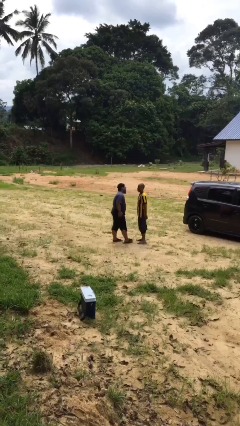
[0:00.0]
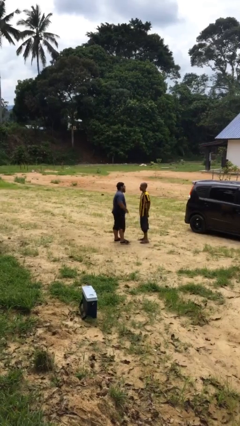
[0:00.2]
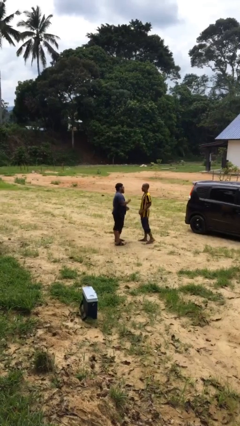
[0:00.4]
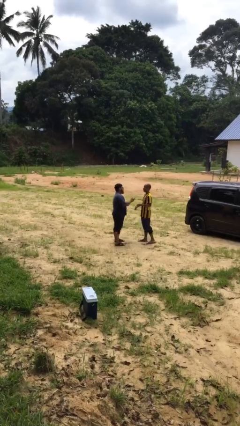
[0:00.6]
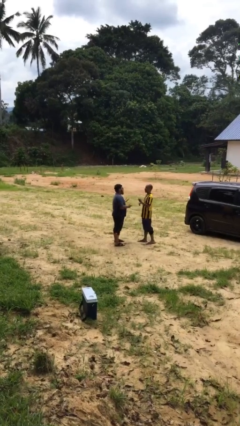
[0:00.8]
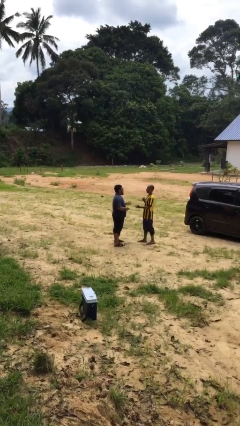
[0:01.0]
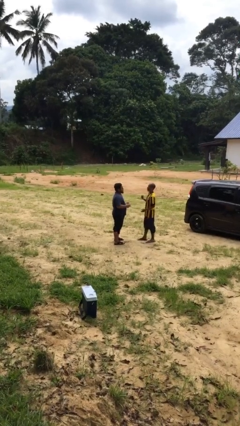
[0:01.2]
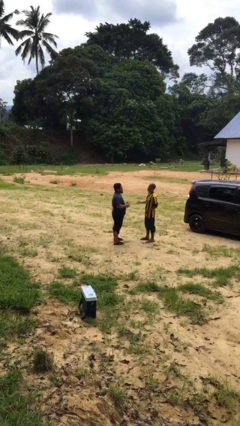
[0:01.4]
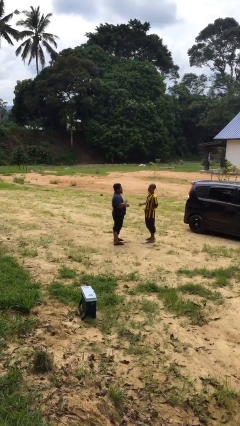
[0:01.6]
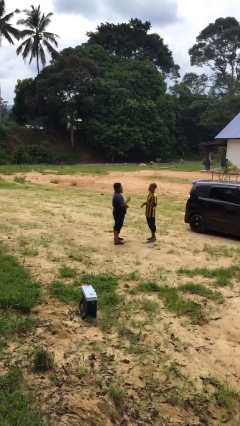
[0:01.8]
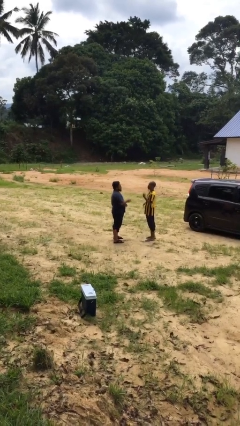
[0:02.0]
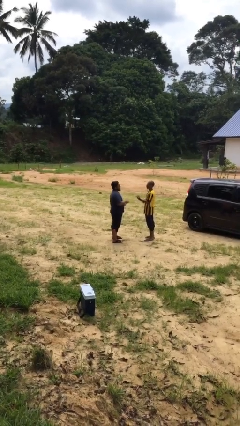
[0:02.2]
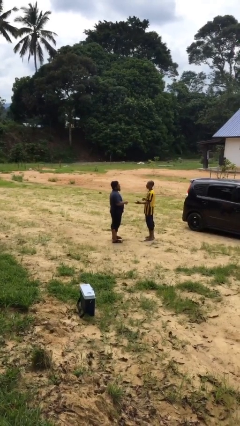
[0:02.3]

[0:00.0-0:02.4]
person talks to person

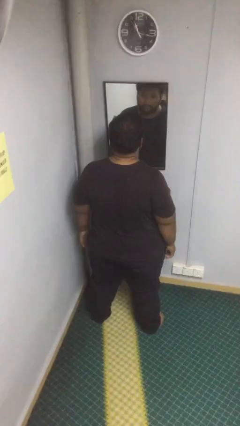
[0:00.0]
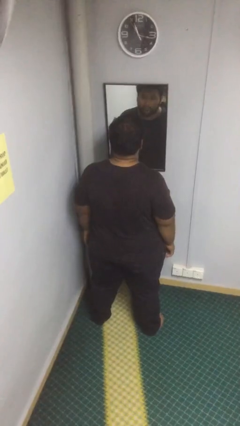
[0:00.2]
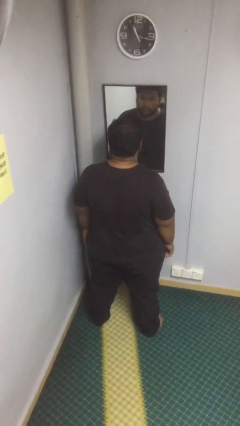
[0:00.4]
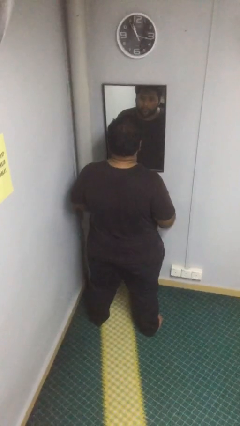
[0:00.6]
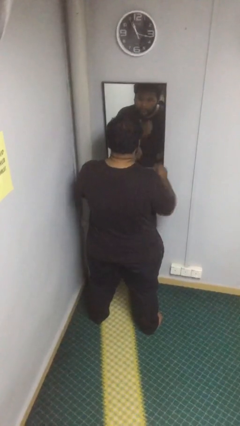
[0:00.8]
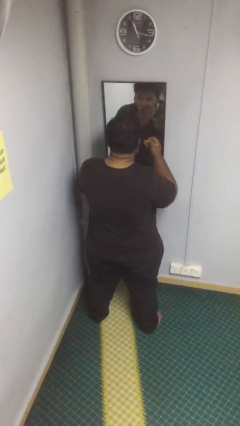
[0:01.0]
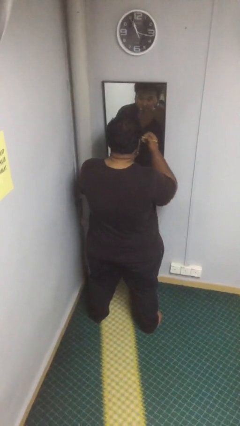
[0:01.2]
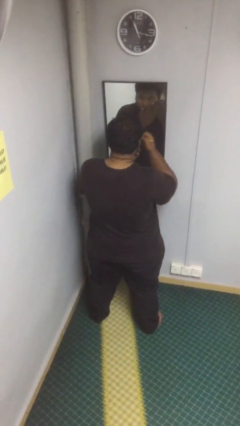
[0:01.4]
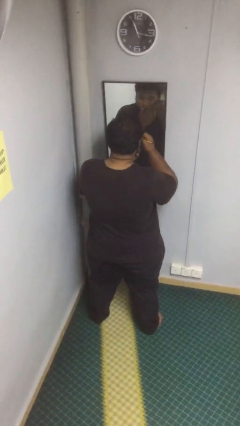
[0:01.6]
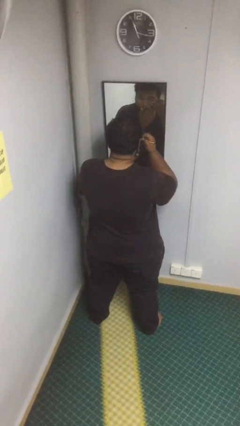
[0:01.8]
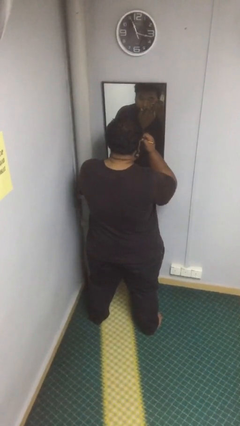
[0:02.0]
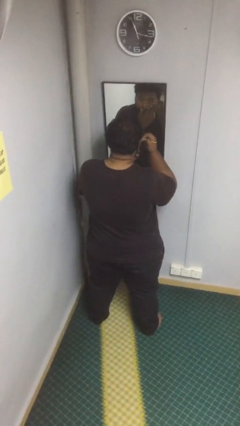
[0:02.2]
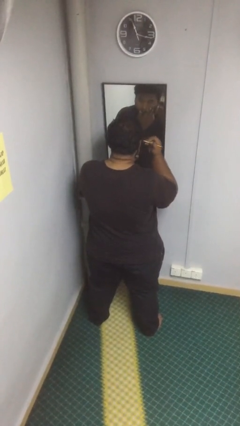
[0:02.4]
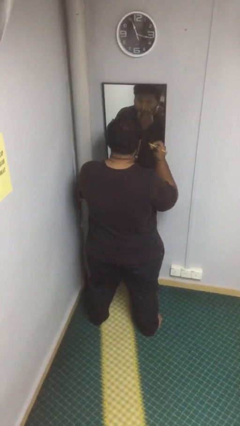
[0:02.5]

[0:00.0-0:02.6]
person applies eye makeup

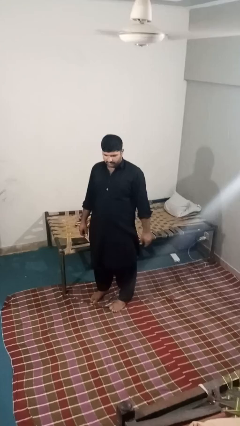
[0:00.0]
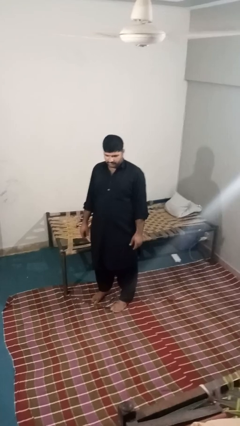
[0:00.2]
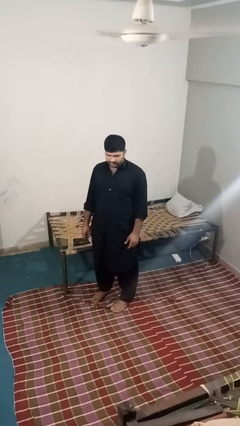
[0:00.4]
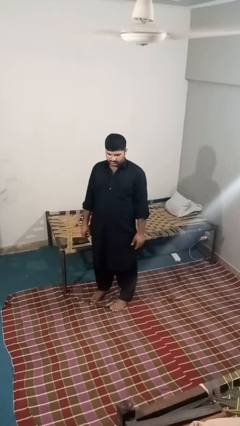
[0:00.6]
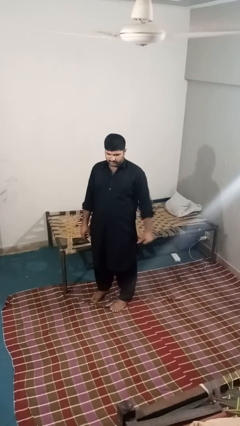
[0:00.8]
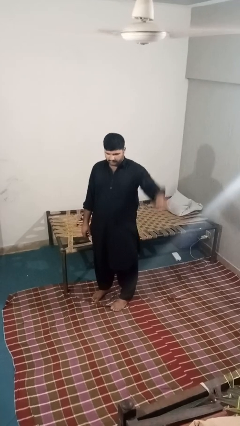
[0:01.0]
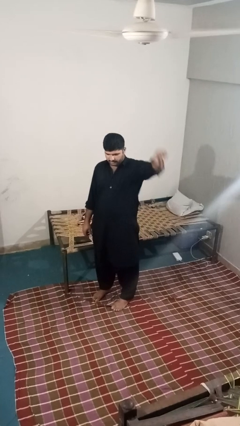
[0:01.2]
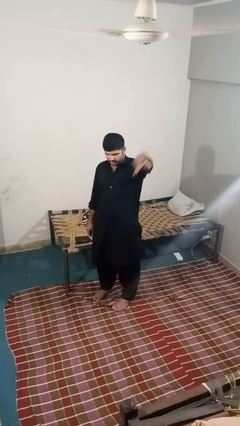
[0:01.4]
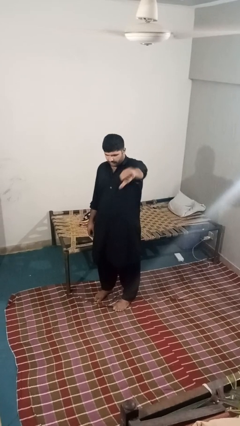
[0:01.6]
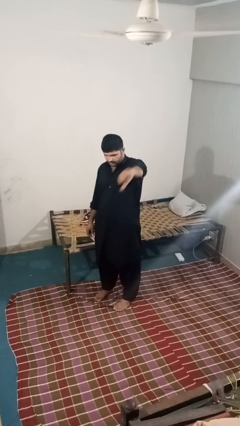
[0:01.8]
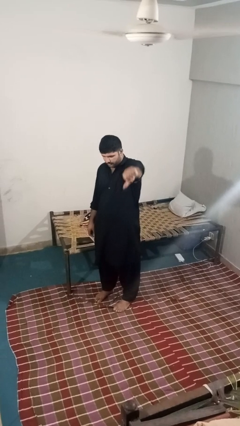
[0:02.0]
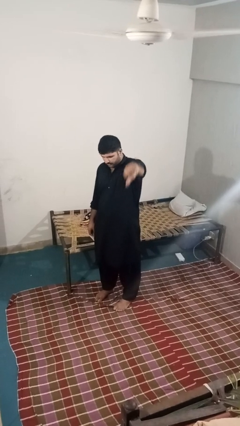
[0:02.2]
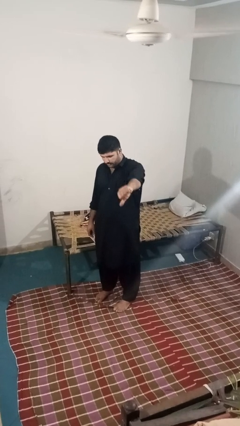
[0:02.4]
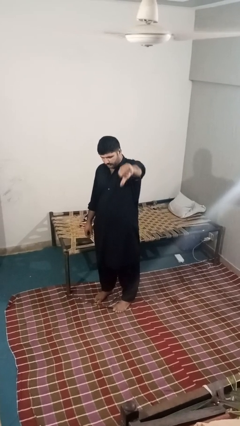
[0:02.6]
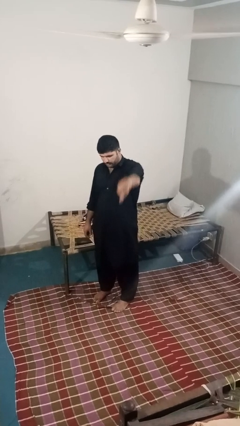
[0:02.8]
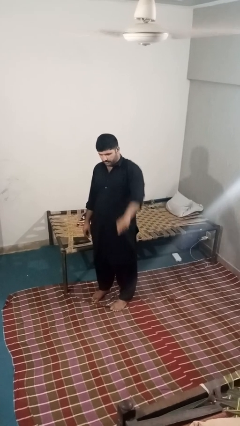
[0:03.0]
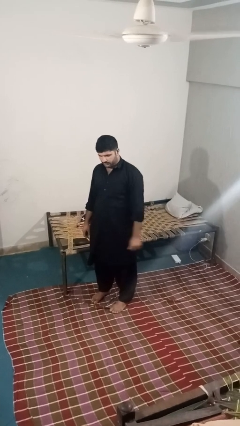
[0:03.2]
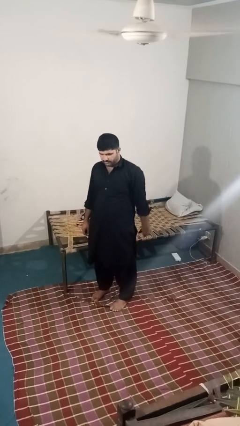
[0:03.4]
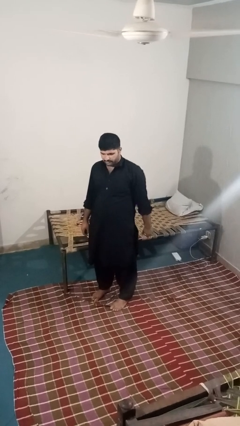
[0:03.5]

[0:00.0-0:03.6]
person gestures thumbs down

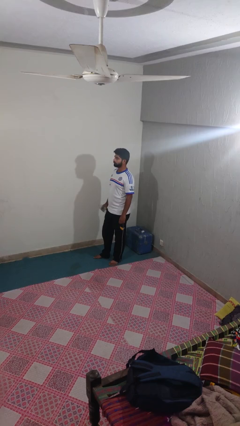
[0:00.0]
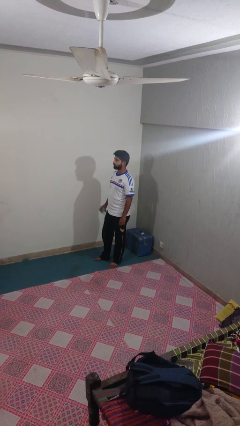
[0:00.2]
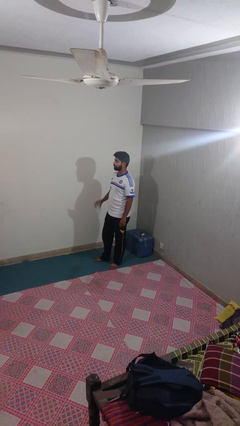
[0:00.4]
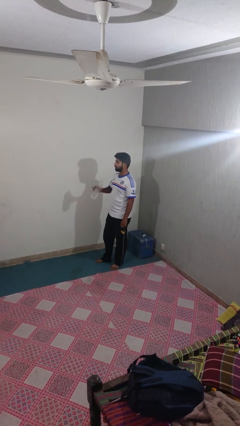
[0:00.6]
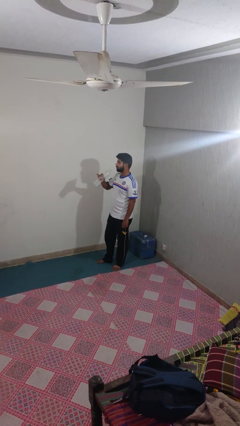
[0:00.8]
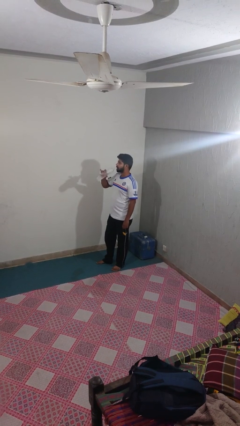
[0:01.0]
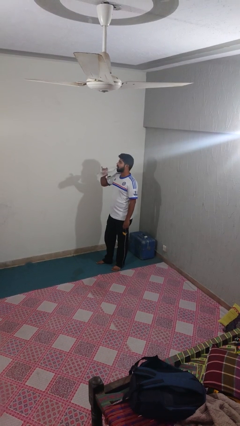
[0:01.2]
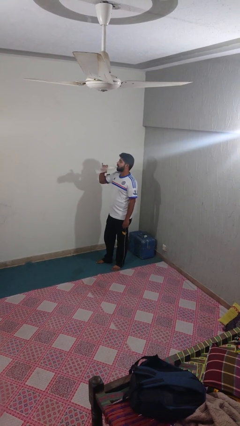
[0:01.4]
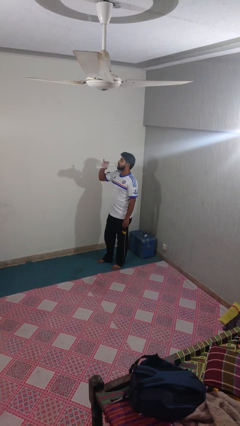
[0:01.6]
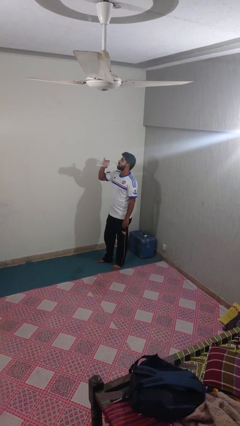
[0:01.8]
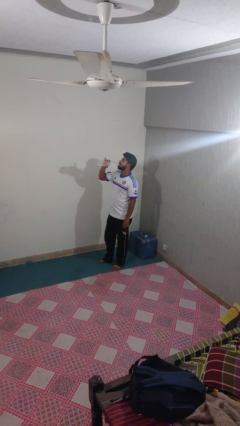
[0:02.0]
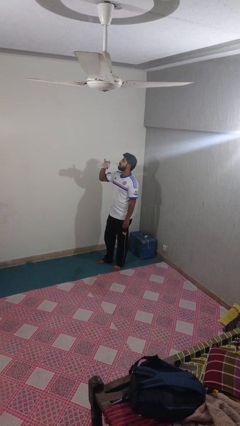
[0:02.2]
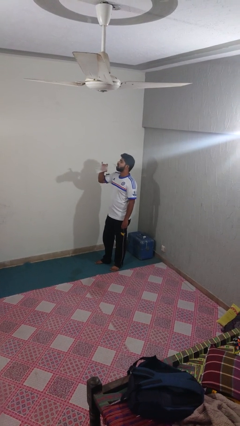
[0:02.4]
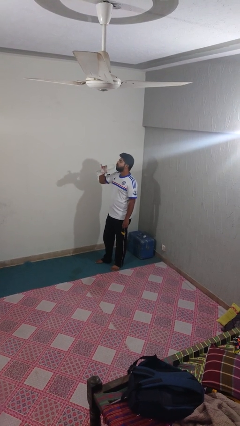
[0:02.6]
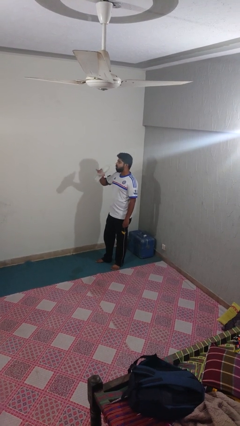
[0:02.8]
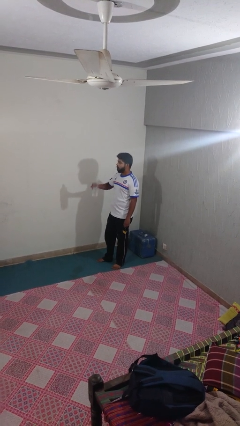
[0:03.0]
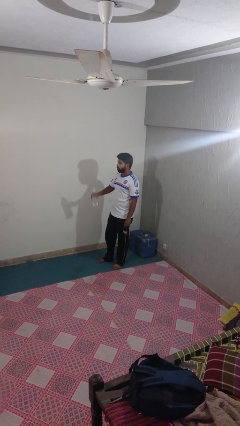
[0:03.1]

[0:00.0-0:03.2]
person drinks from bottle

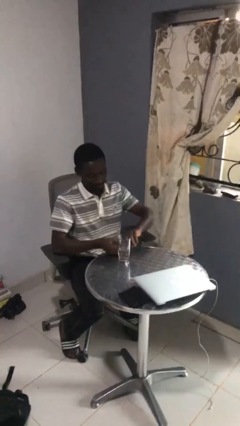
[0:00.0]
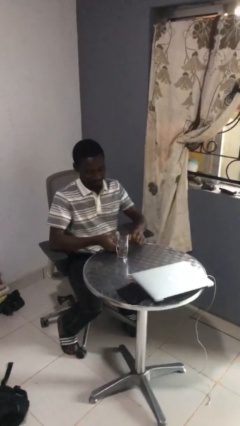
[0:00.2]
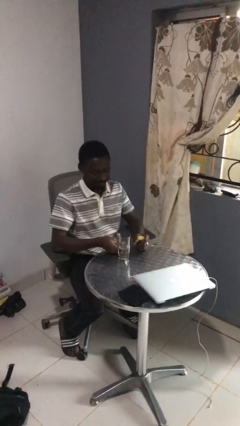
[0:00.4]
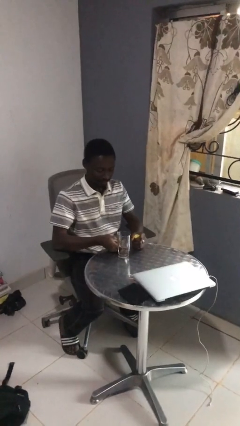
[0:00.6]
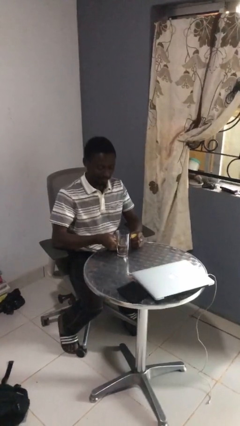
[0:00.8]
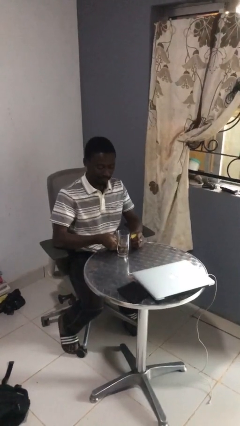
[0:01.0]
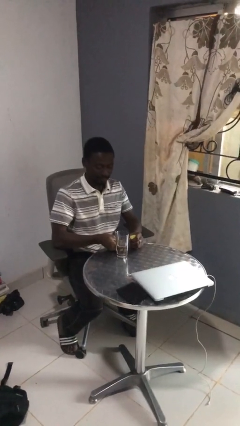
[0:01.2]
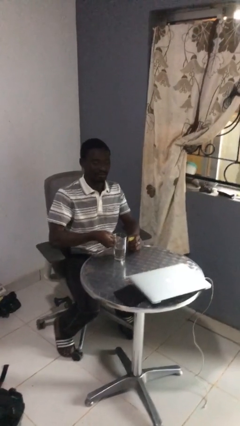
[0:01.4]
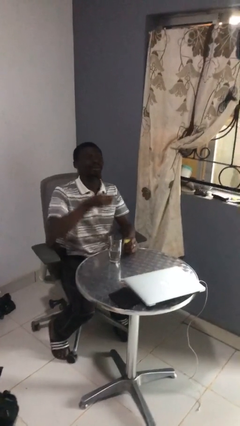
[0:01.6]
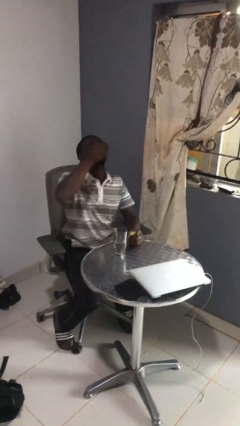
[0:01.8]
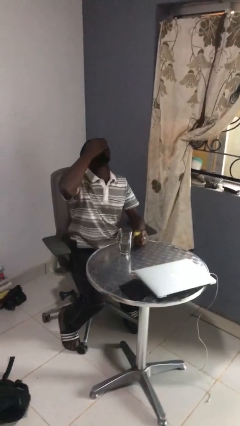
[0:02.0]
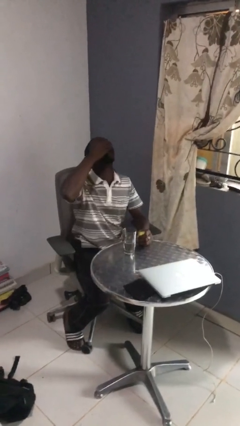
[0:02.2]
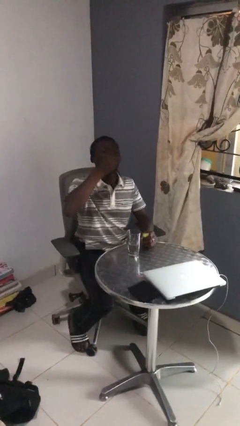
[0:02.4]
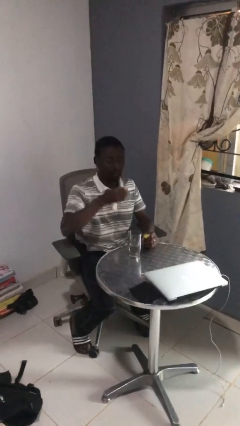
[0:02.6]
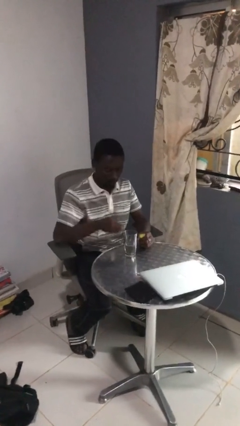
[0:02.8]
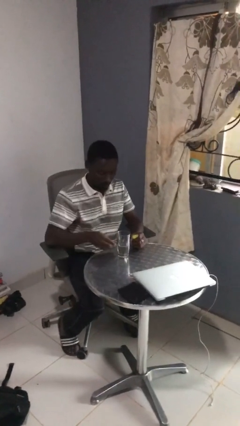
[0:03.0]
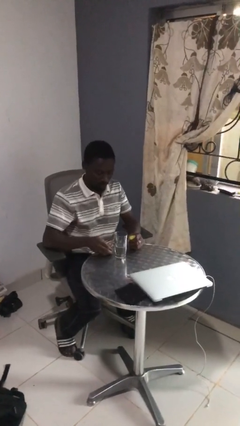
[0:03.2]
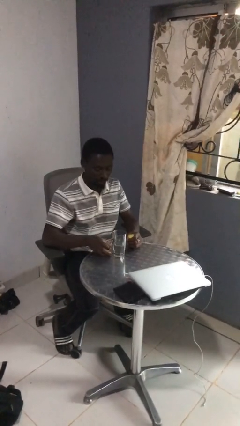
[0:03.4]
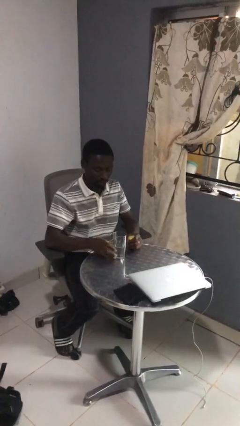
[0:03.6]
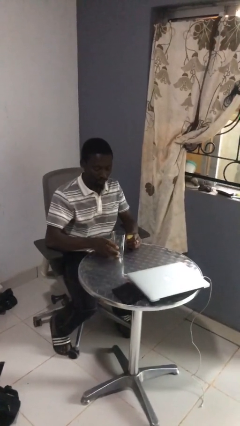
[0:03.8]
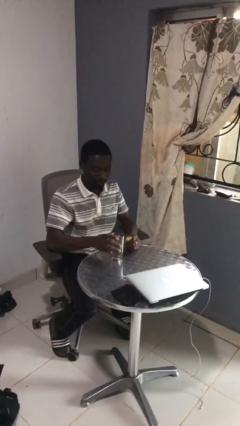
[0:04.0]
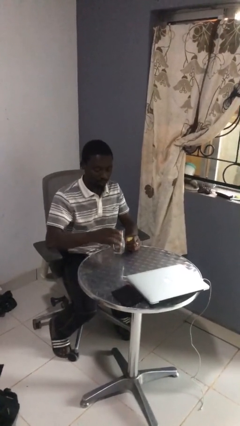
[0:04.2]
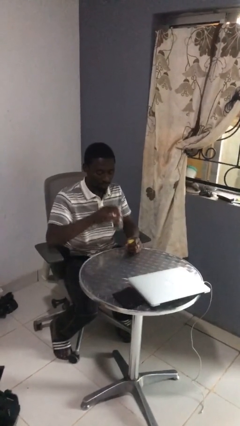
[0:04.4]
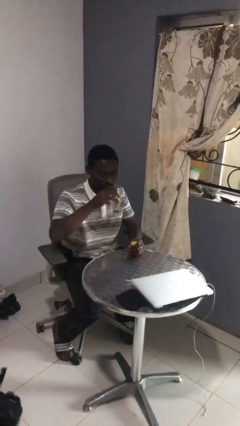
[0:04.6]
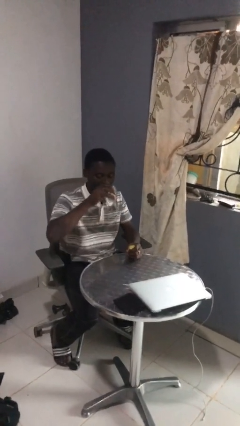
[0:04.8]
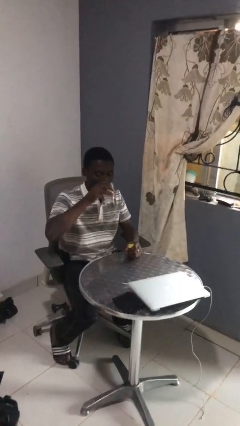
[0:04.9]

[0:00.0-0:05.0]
person takes medicine pills

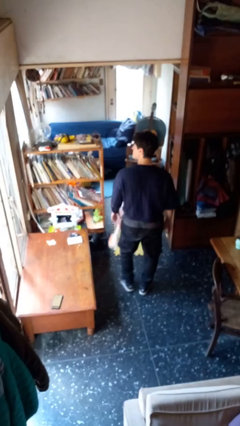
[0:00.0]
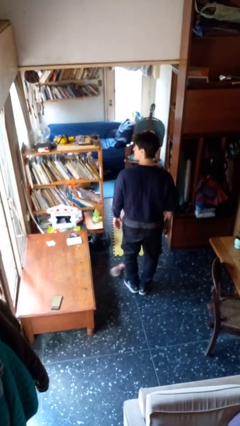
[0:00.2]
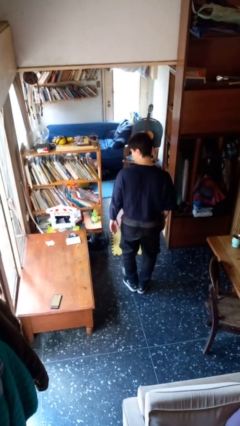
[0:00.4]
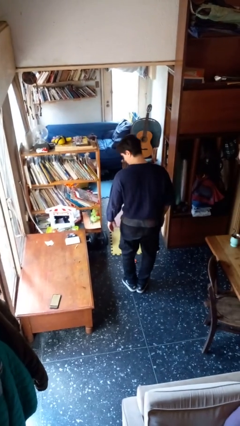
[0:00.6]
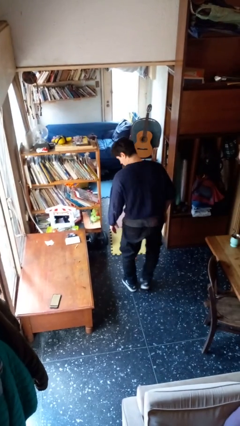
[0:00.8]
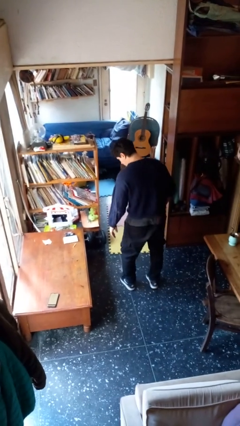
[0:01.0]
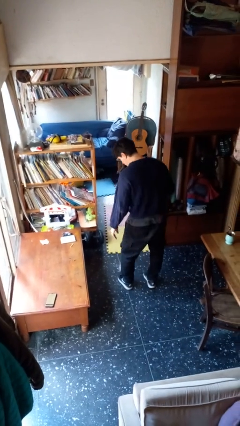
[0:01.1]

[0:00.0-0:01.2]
person drops object
